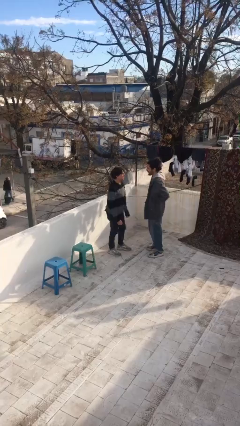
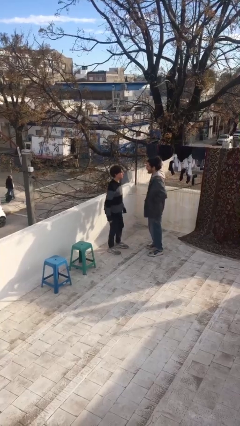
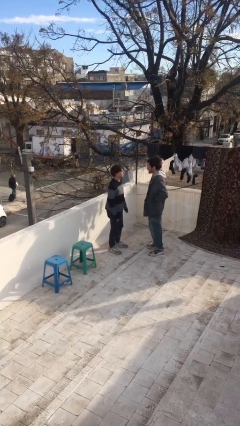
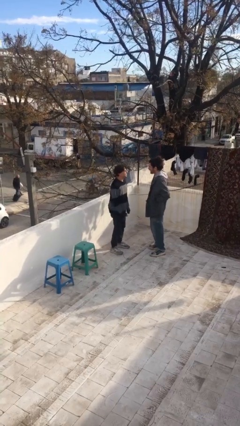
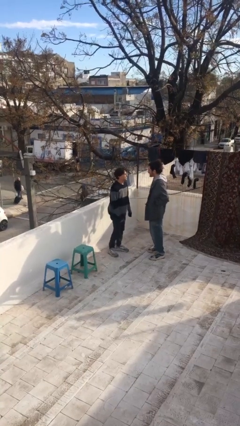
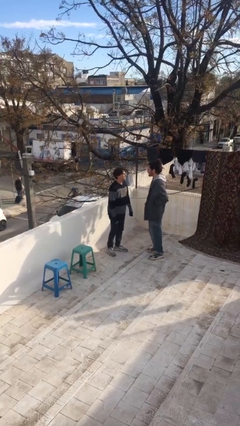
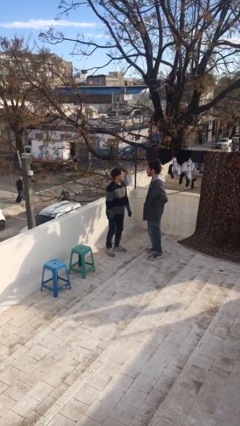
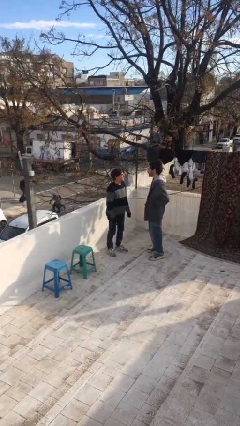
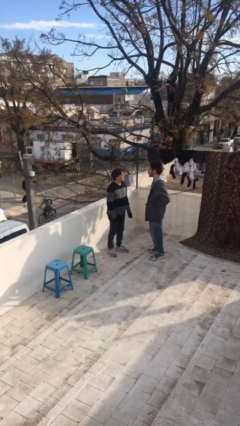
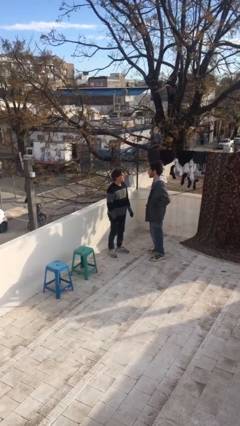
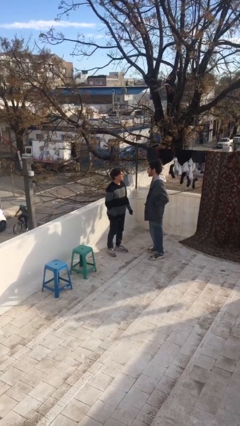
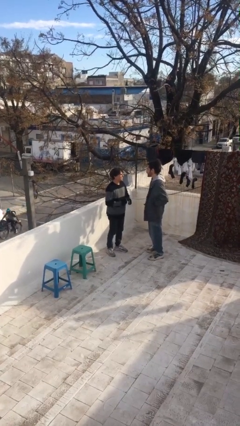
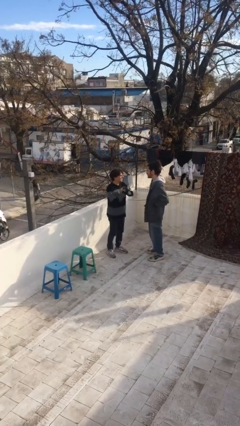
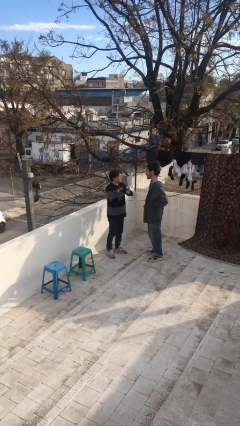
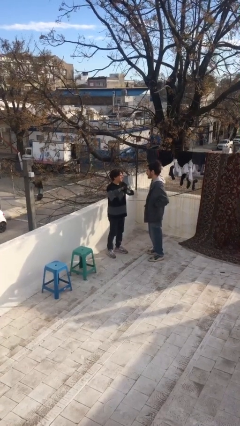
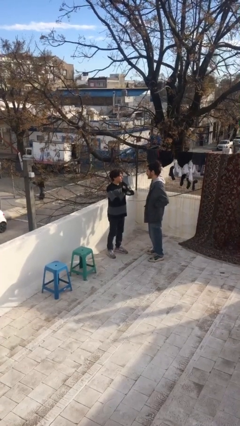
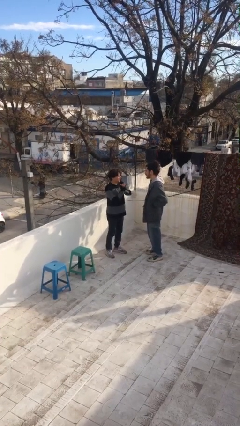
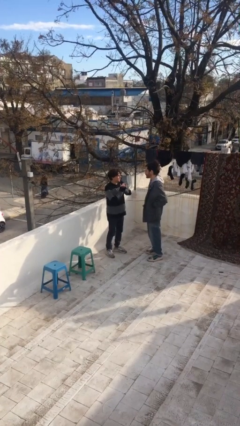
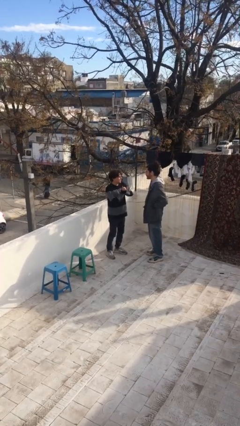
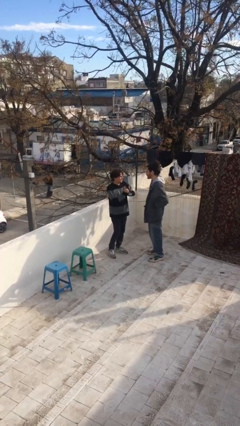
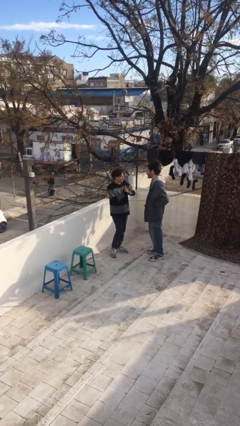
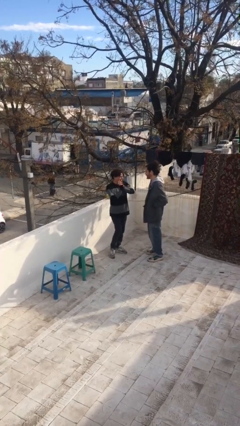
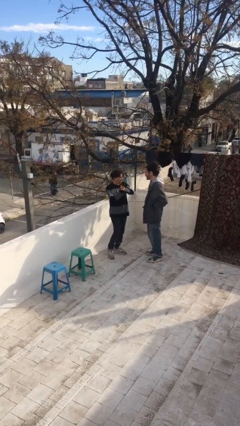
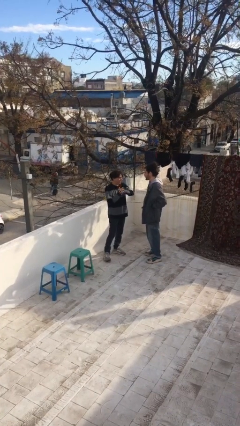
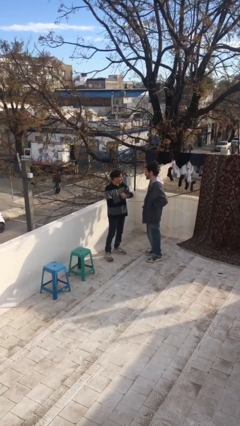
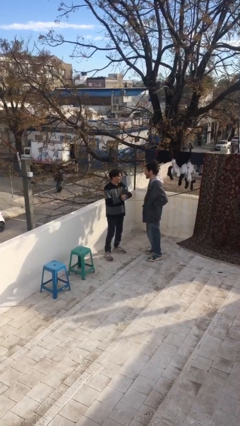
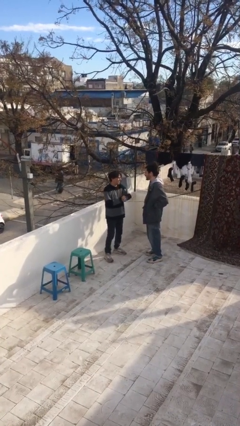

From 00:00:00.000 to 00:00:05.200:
person talks to person

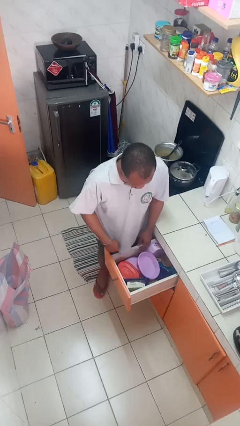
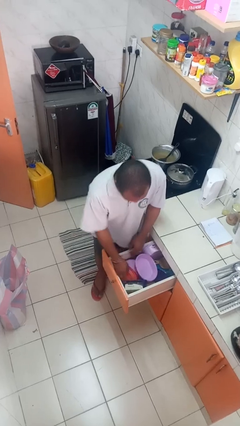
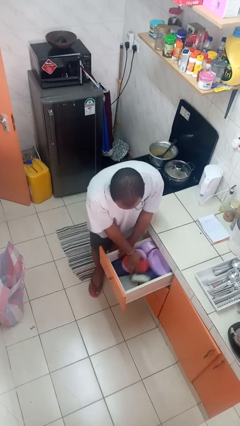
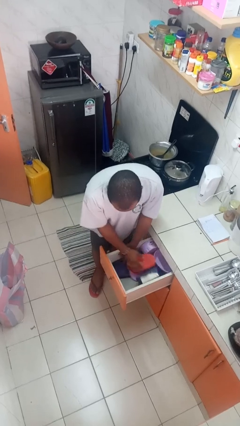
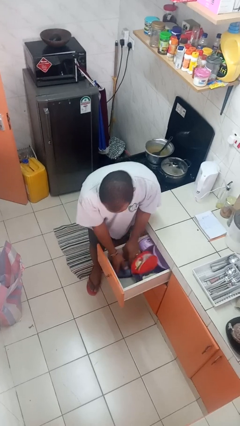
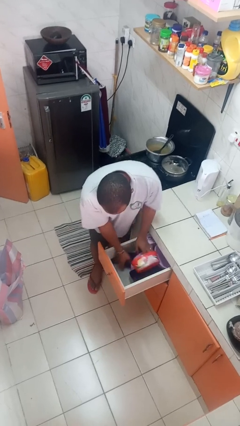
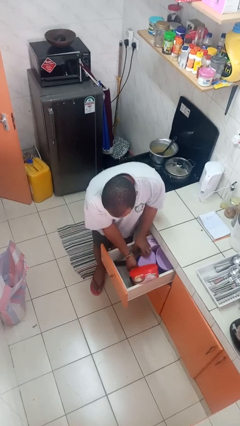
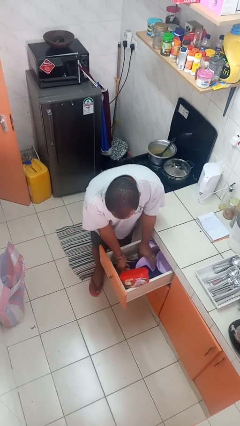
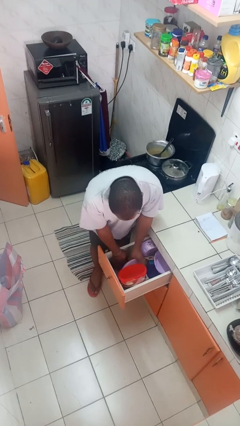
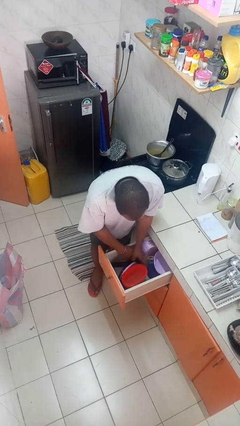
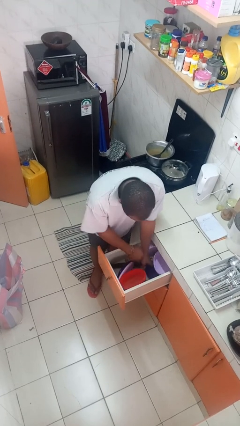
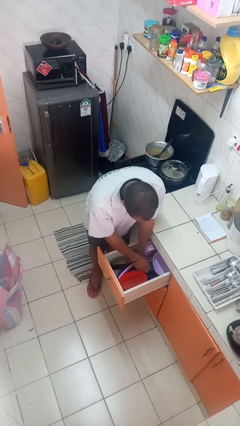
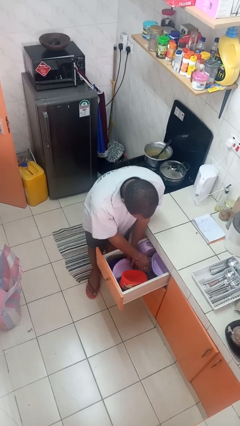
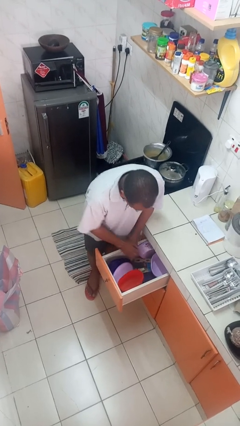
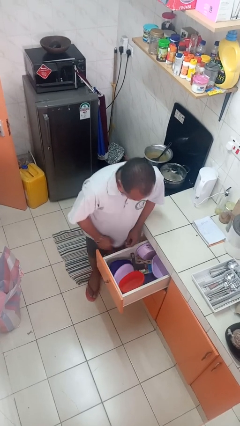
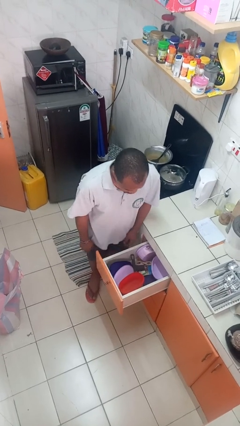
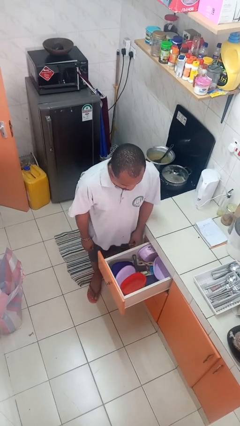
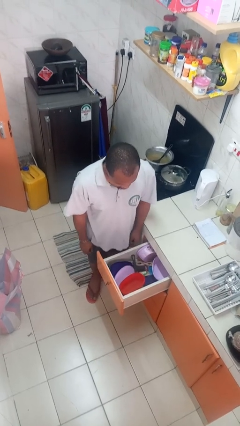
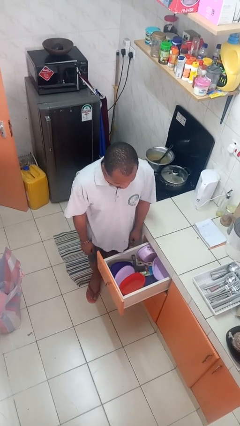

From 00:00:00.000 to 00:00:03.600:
person searches in kitchen drawer

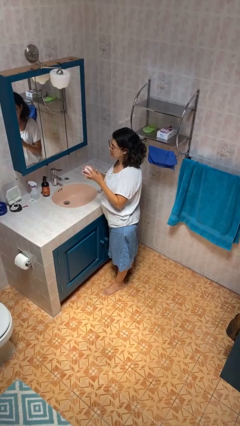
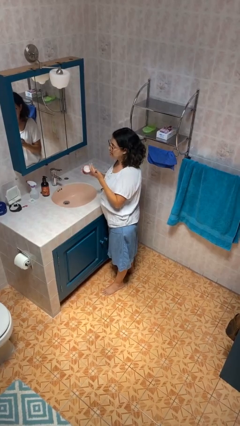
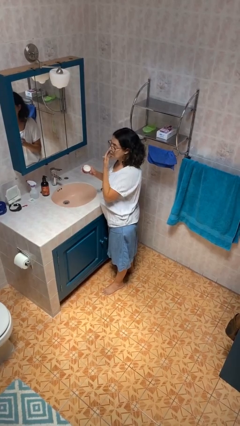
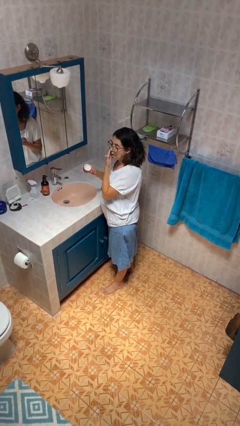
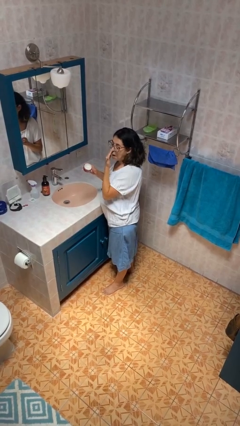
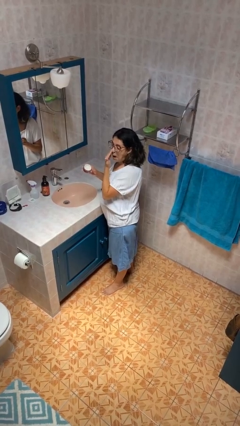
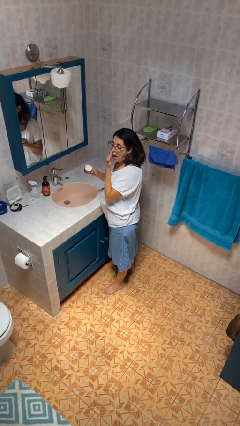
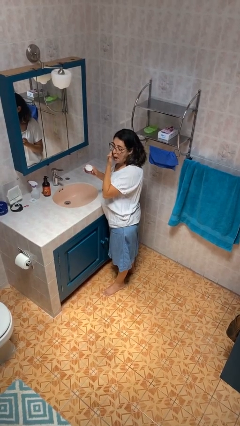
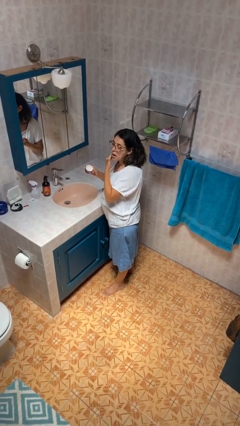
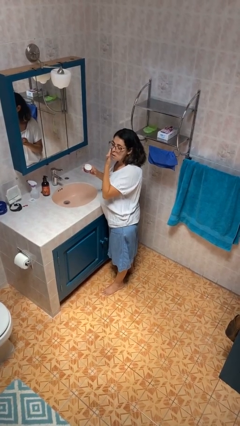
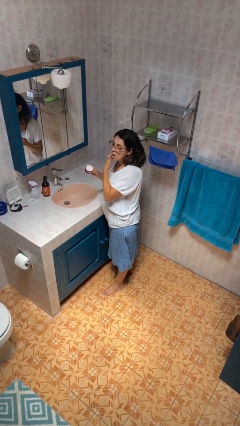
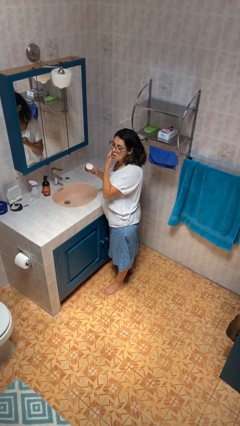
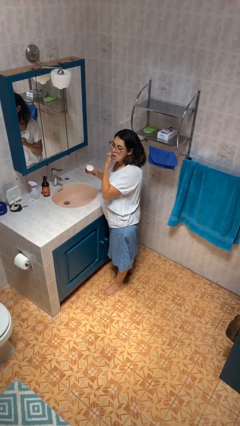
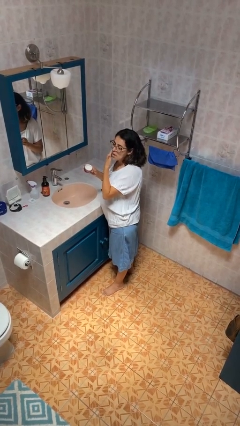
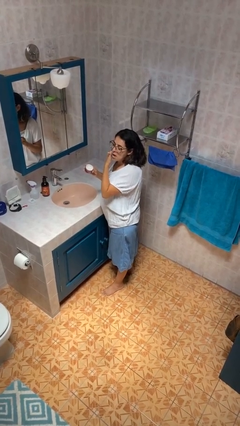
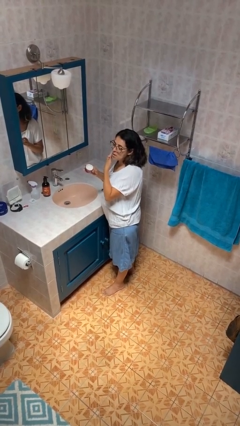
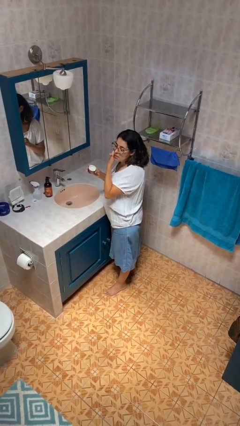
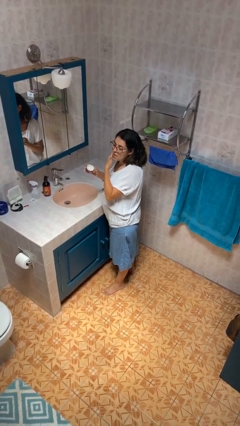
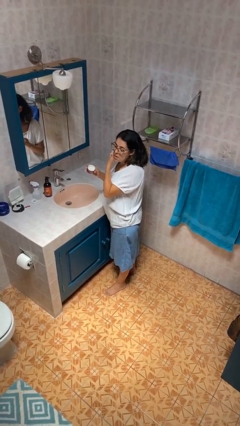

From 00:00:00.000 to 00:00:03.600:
person applies facial moisturizer

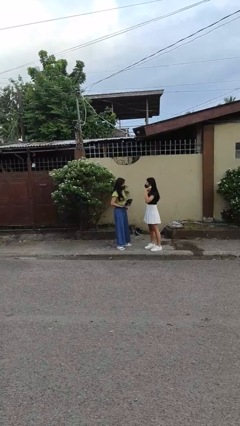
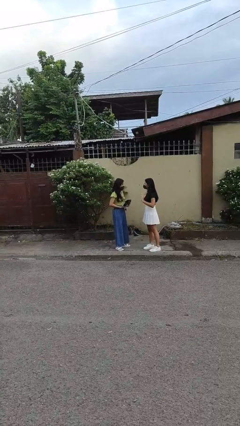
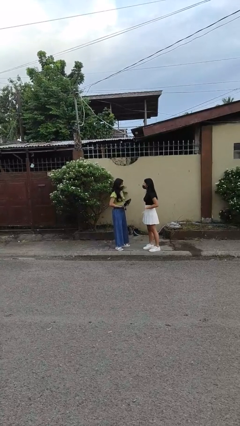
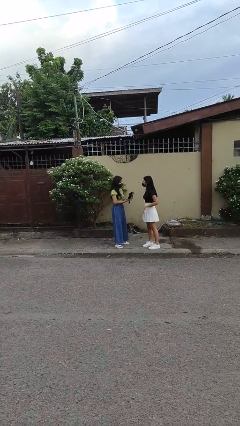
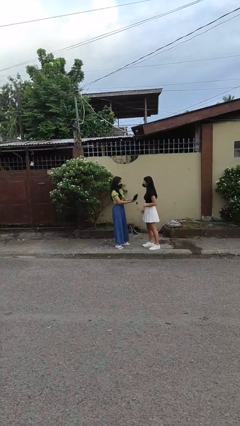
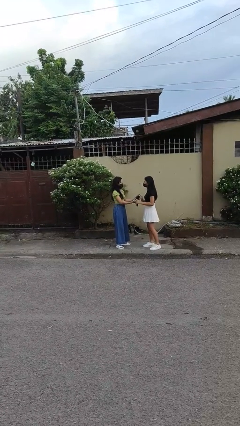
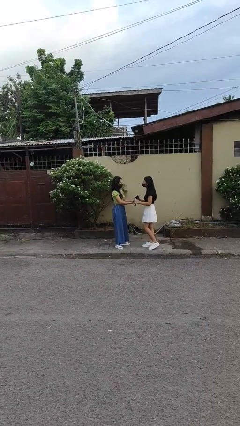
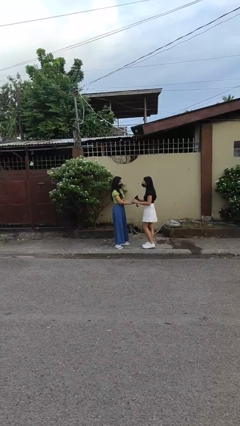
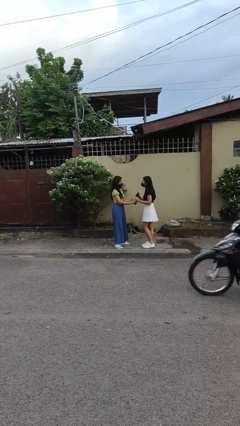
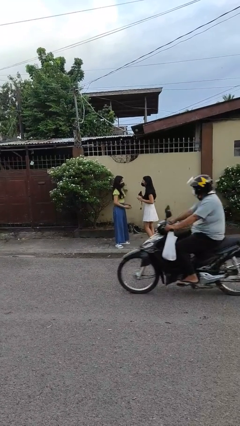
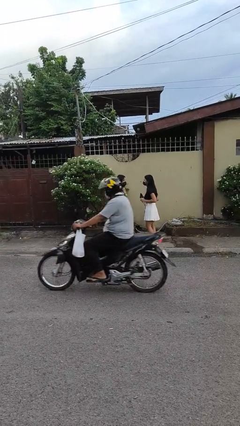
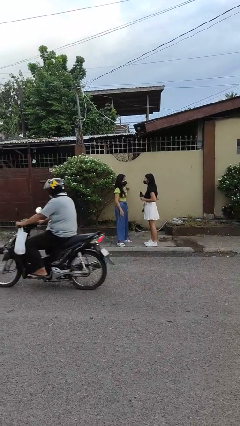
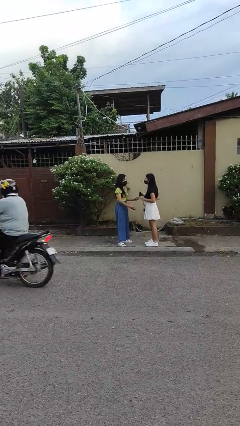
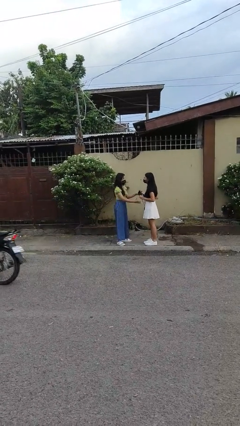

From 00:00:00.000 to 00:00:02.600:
person transfers object to person

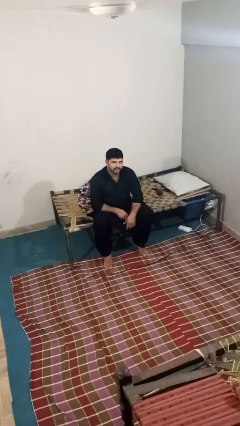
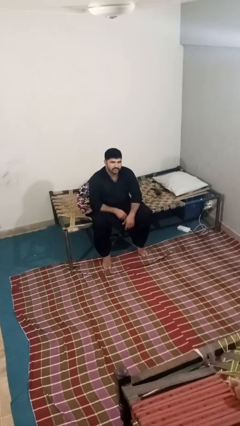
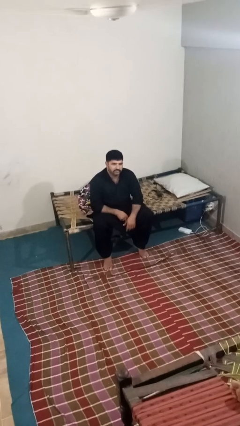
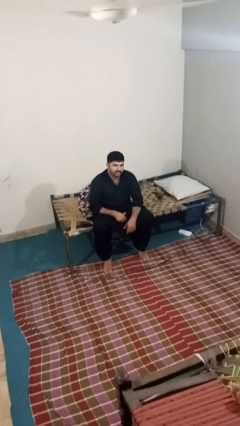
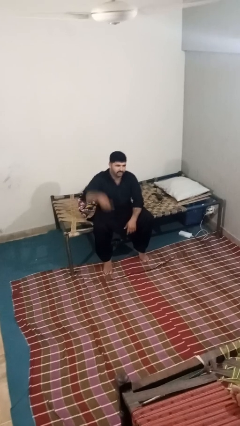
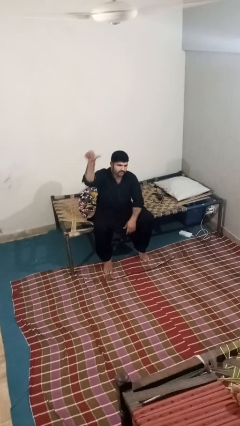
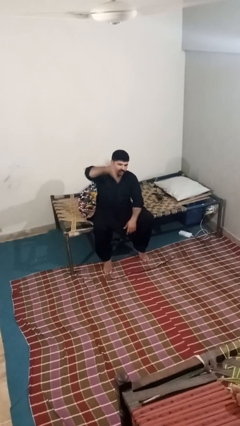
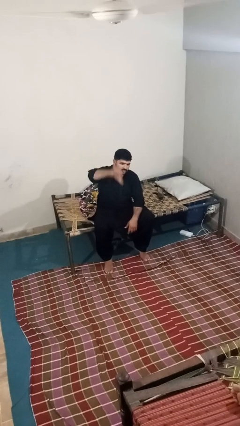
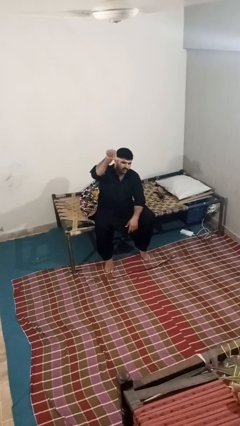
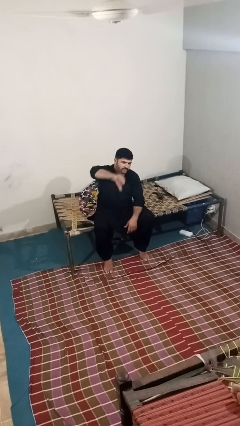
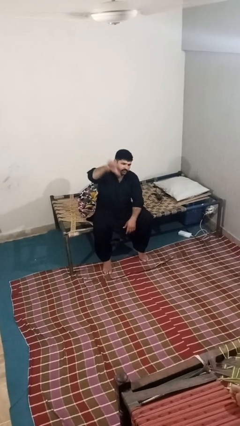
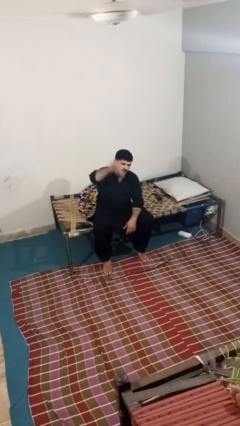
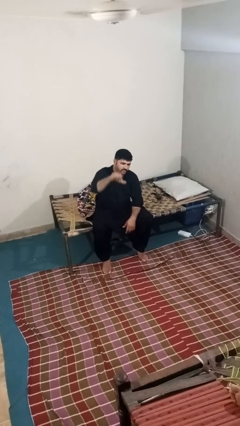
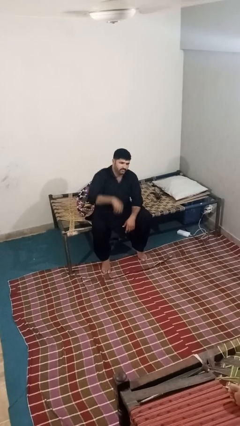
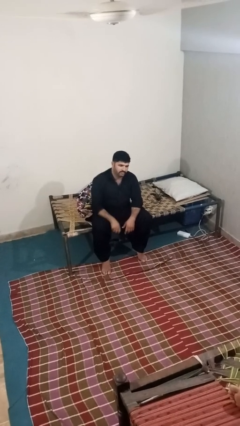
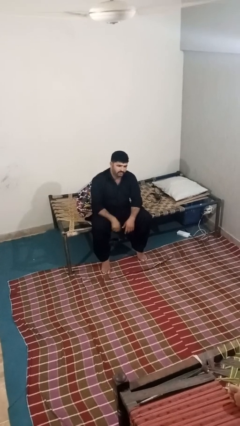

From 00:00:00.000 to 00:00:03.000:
person gestures thumbs down
